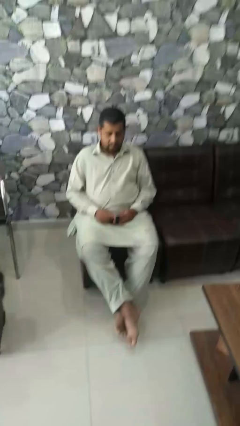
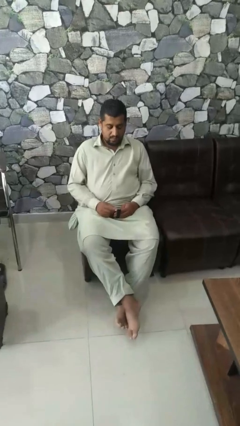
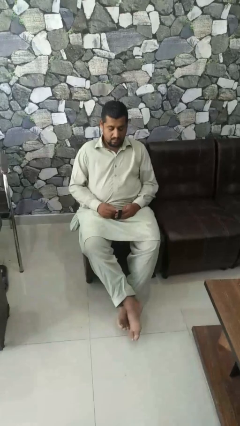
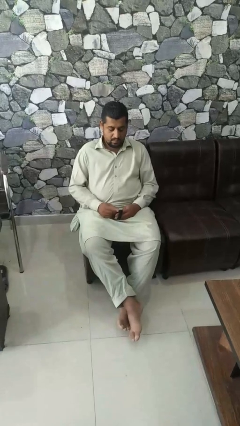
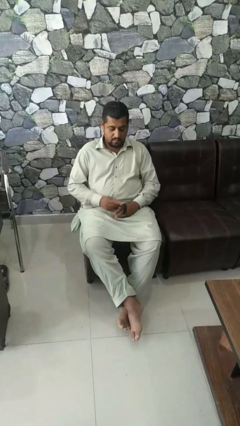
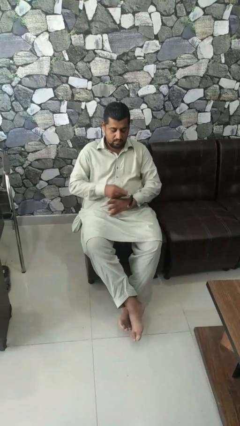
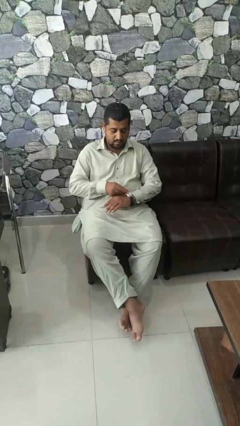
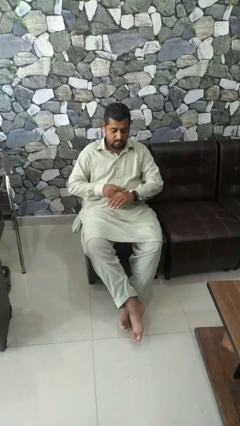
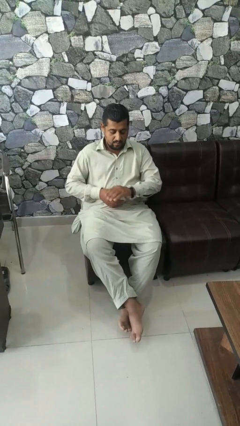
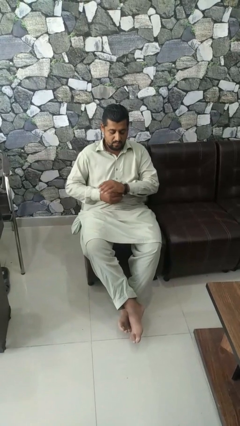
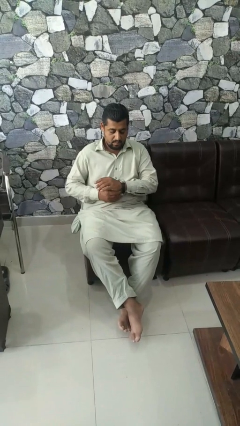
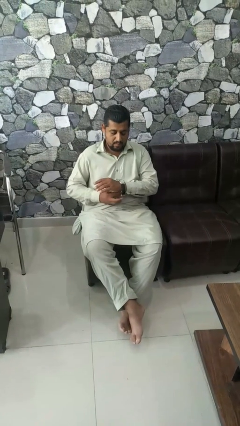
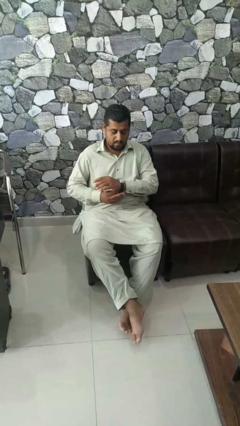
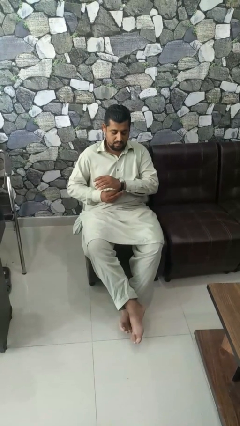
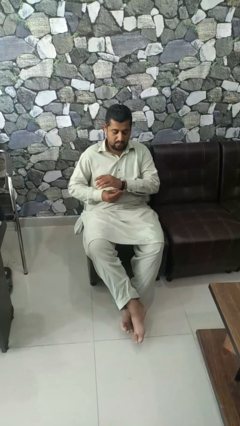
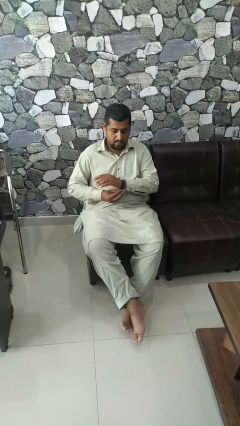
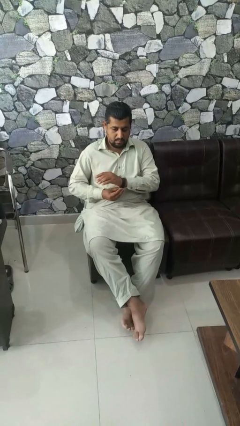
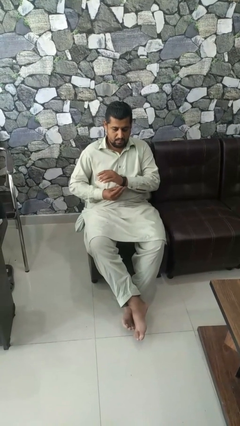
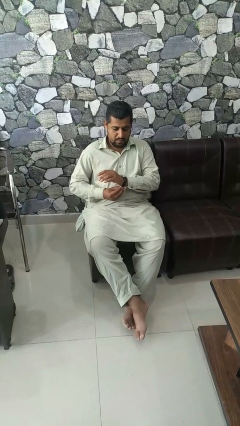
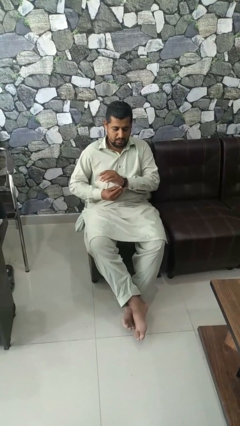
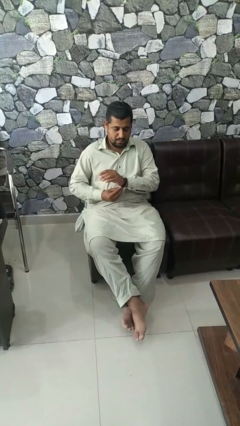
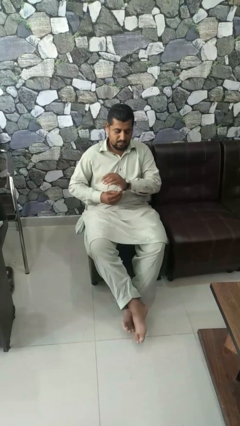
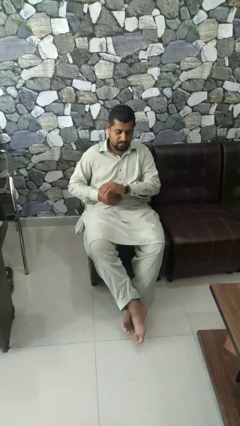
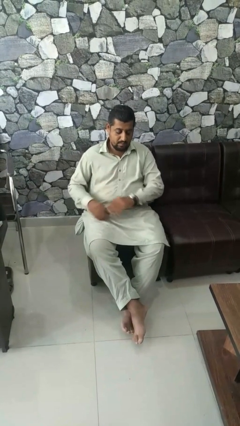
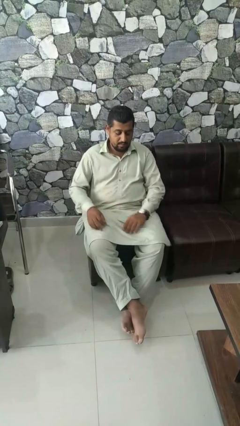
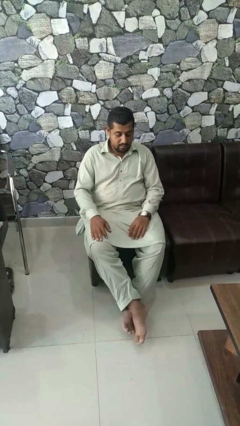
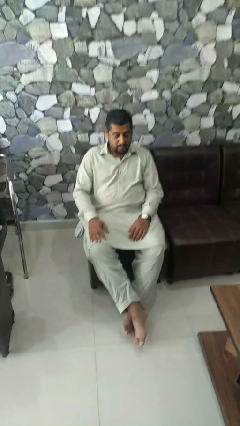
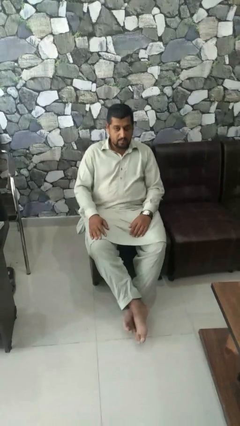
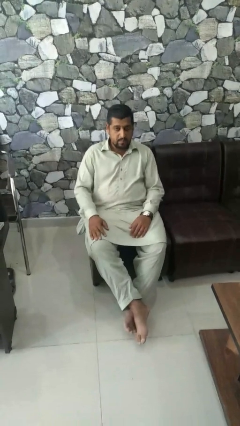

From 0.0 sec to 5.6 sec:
person puts on wristwatch

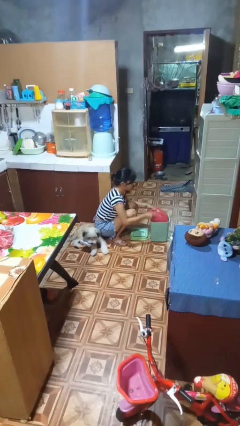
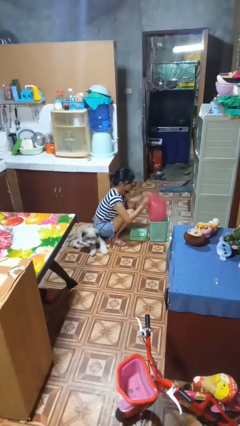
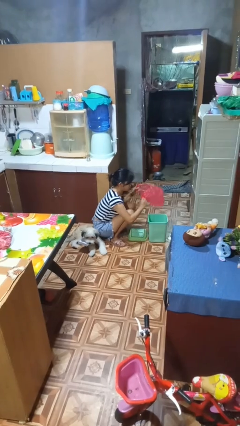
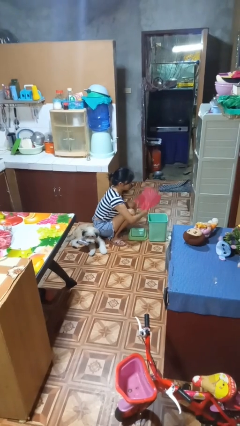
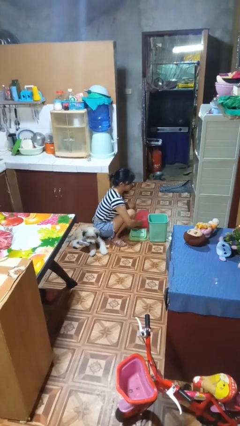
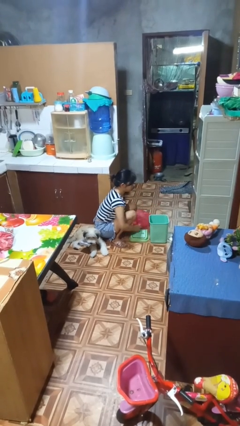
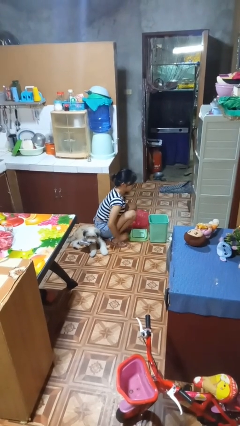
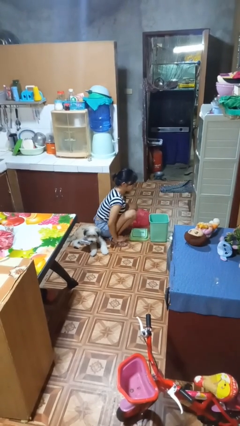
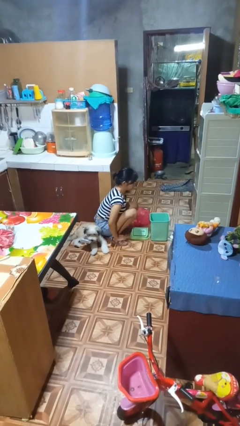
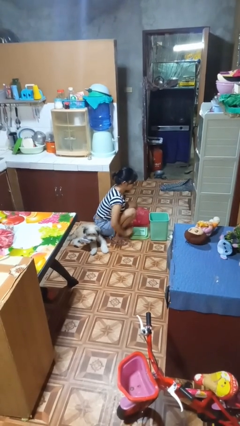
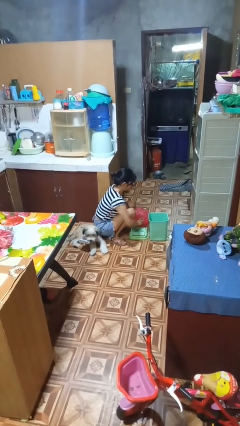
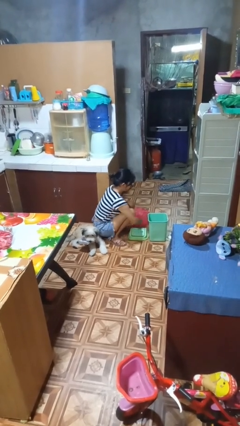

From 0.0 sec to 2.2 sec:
person removes trashbag from trashcan

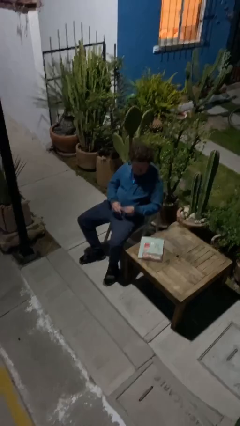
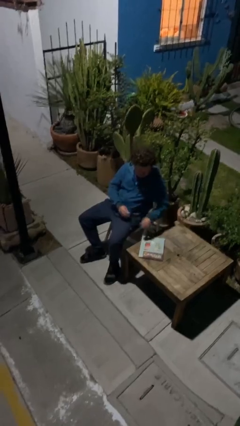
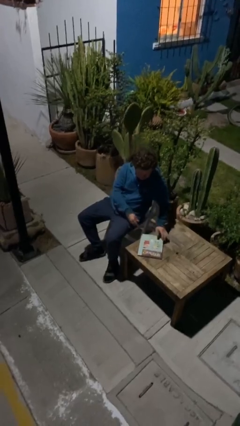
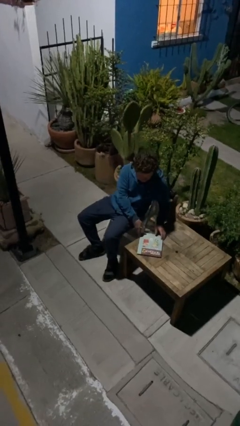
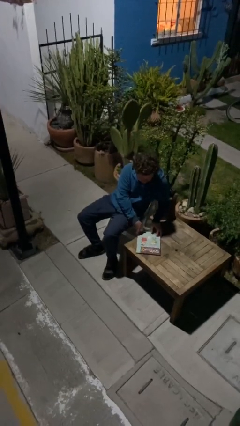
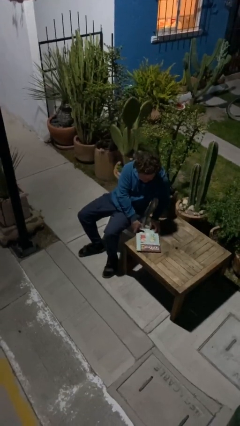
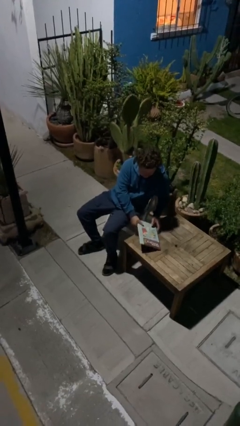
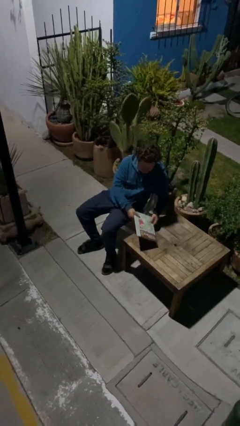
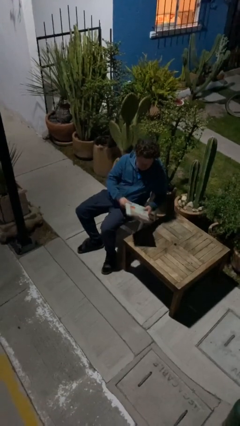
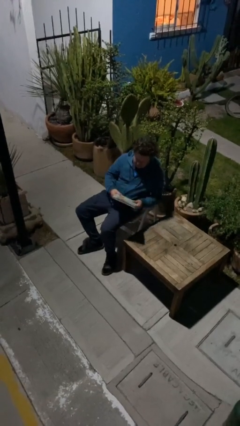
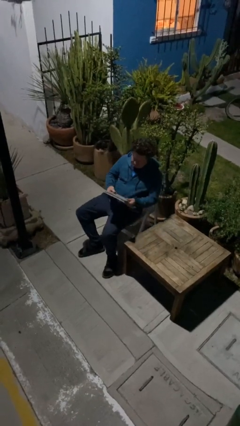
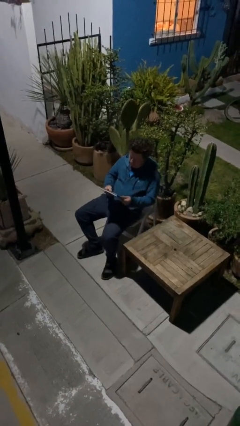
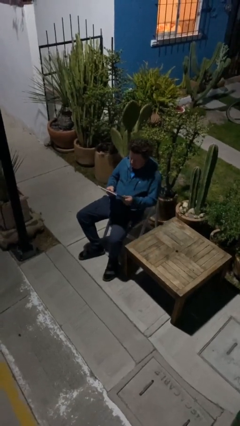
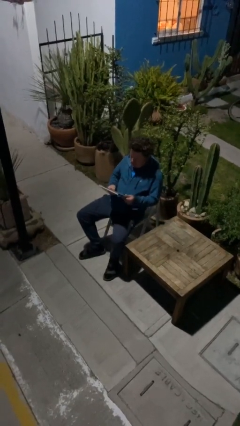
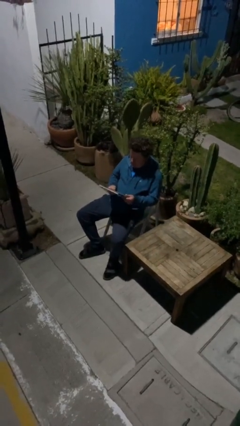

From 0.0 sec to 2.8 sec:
person picks up object from table

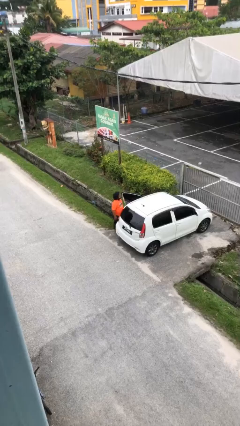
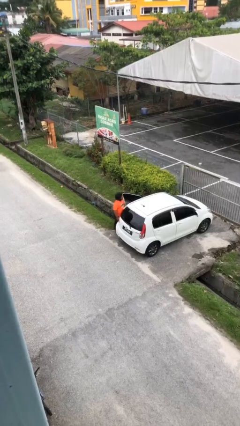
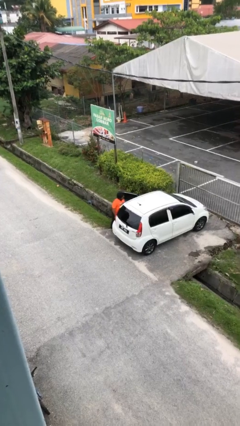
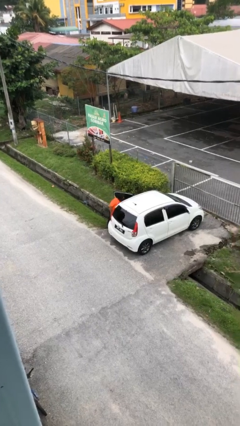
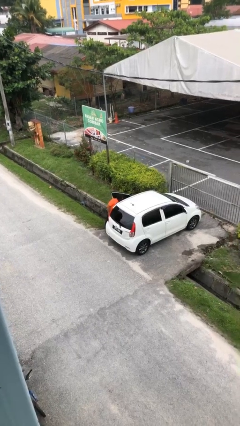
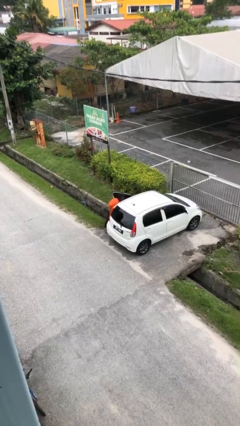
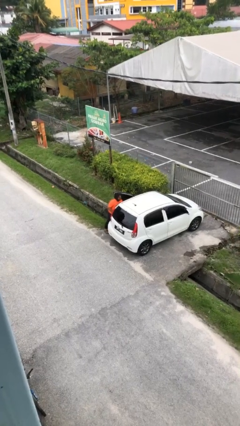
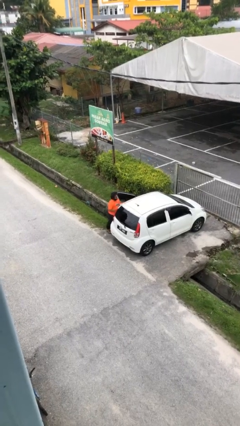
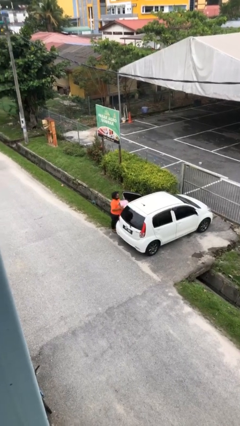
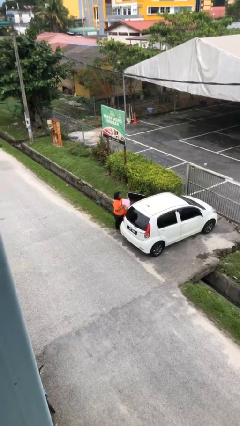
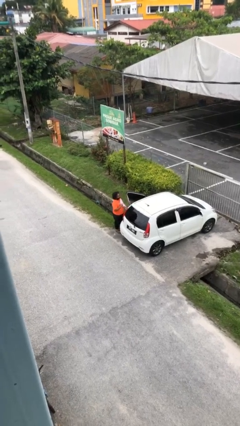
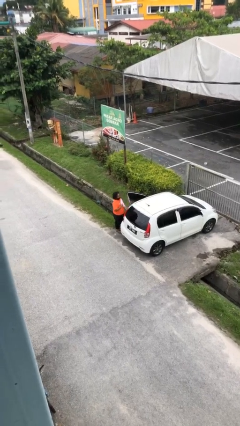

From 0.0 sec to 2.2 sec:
person unloads car

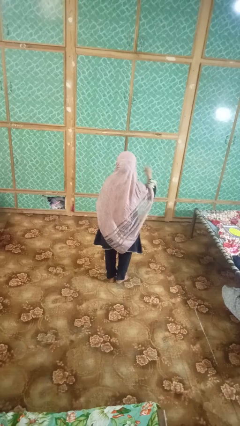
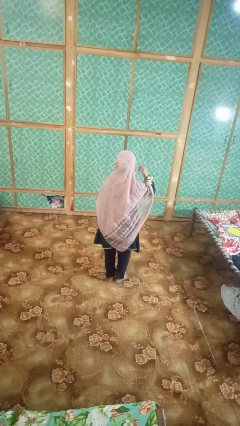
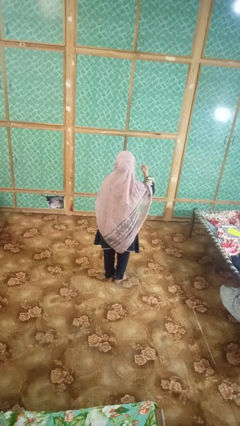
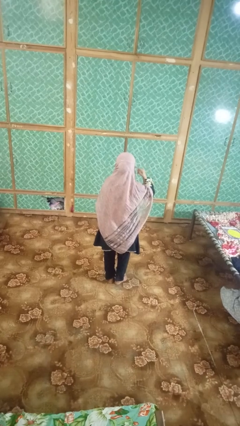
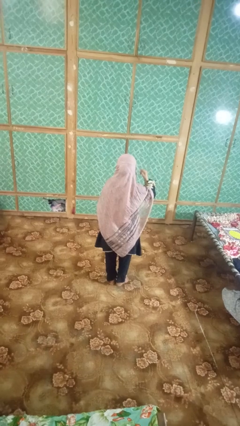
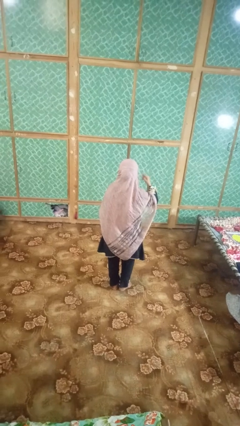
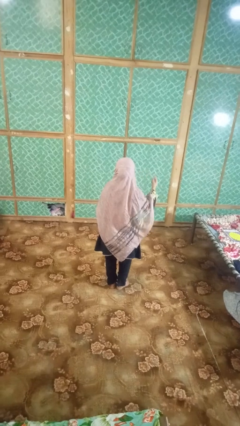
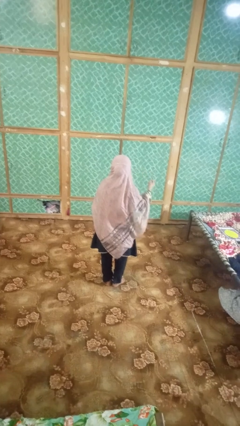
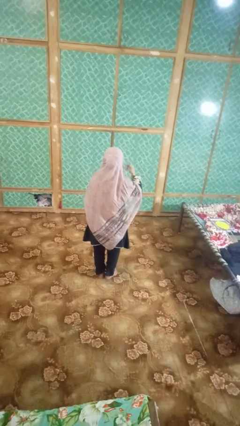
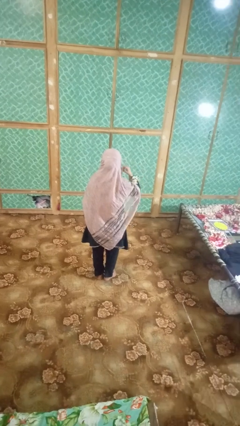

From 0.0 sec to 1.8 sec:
person gestures listen closely

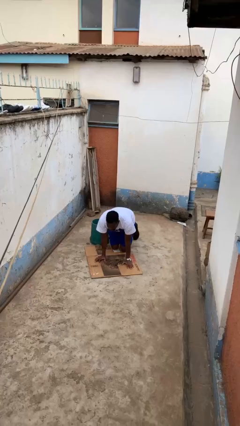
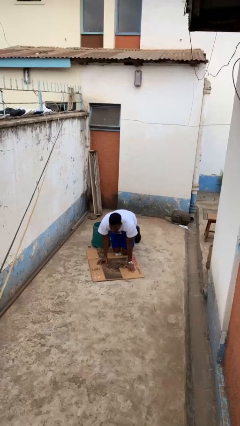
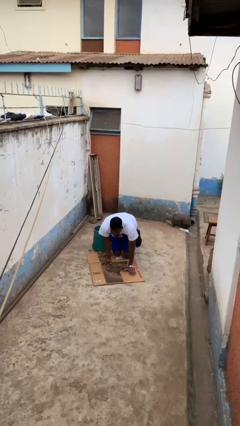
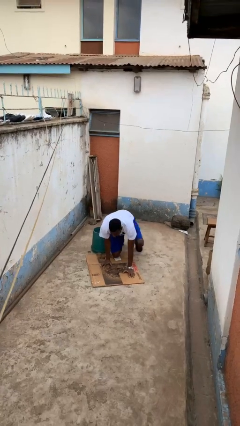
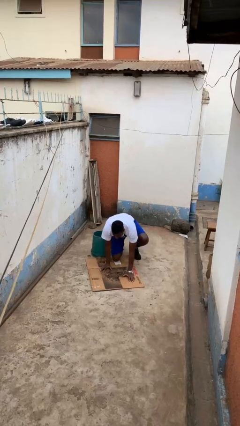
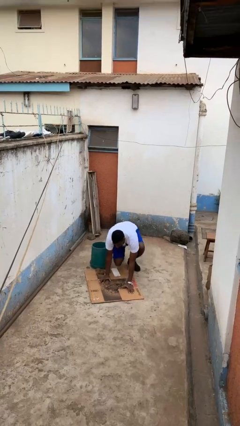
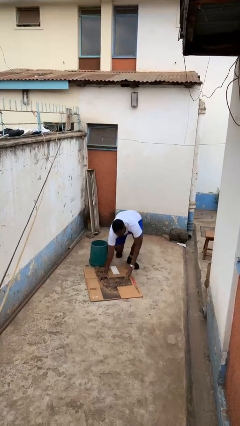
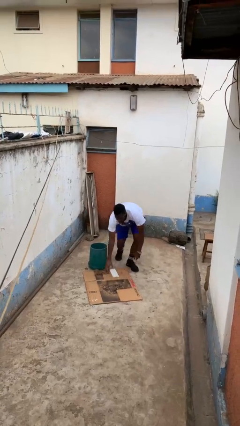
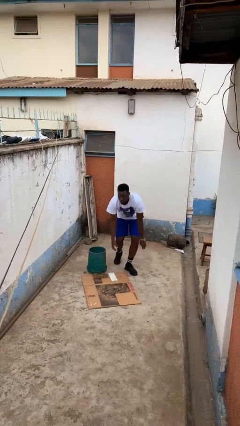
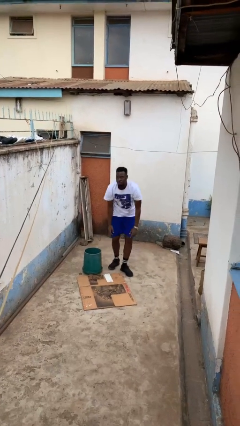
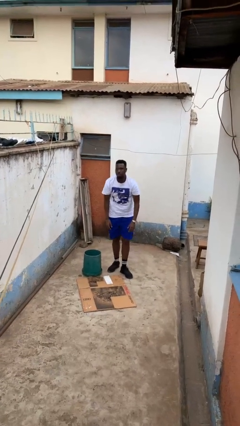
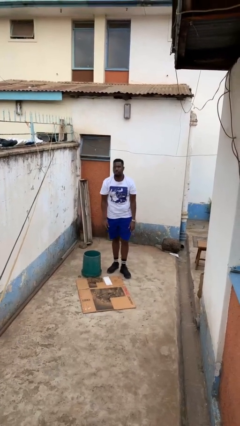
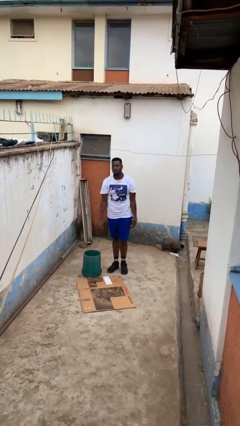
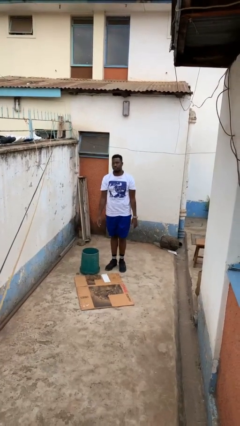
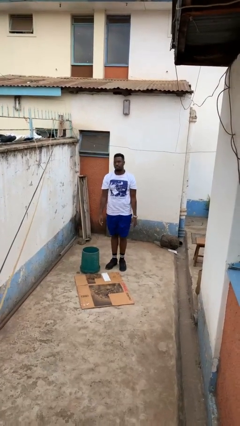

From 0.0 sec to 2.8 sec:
person stands up from floor
